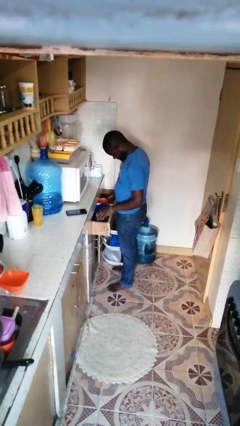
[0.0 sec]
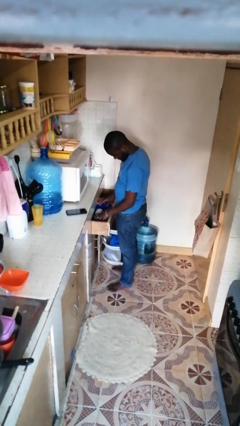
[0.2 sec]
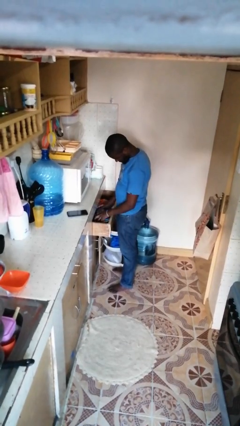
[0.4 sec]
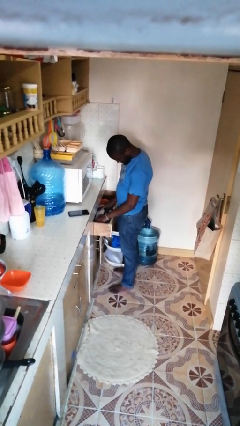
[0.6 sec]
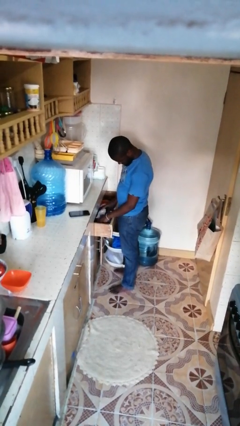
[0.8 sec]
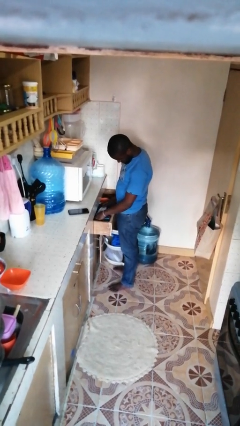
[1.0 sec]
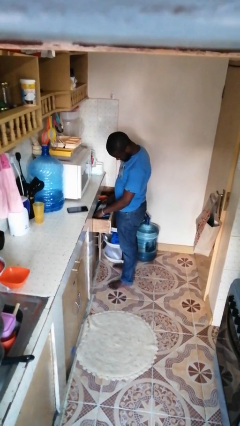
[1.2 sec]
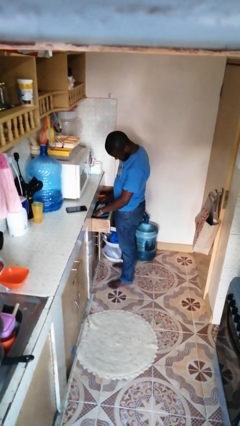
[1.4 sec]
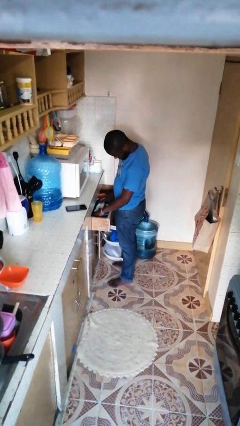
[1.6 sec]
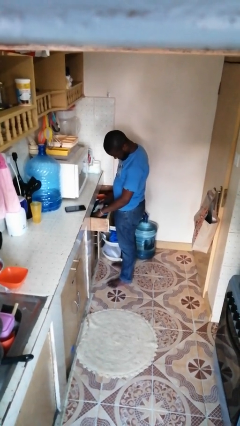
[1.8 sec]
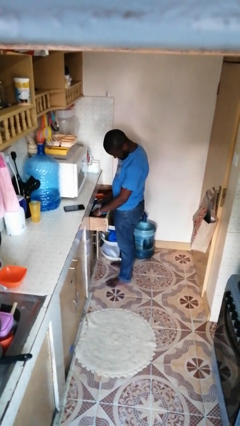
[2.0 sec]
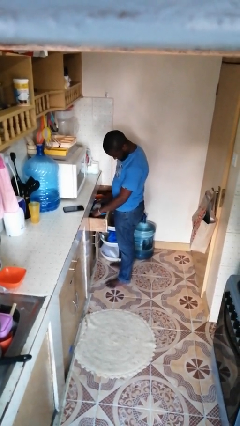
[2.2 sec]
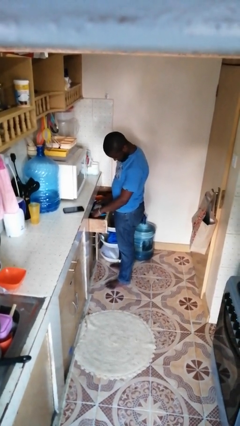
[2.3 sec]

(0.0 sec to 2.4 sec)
person searches in kitchen drawer

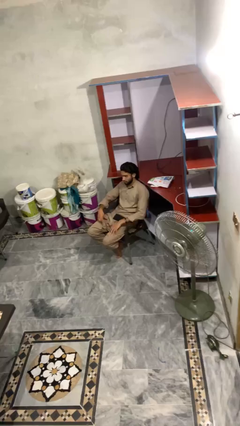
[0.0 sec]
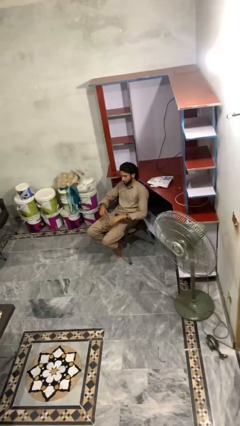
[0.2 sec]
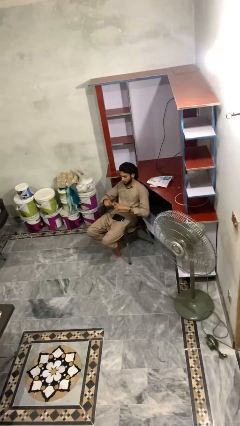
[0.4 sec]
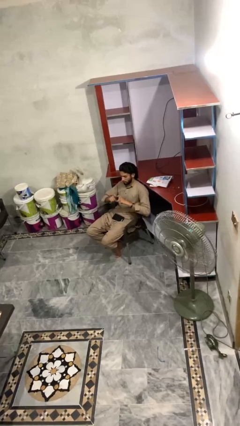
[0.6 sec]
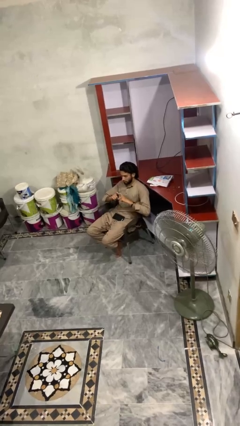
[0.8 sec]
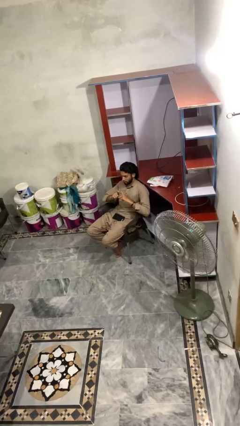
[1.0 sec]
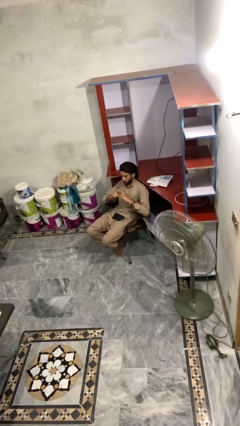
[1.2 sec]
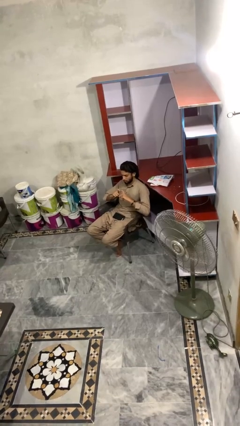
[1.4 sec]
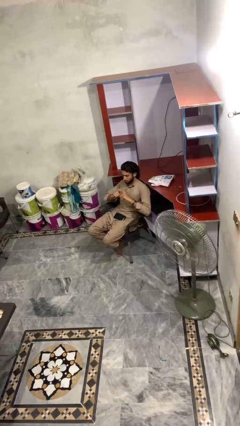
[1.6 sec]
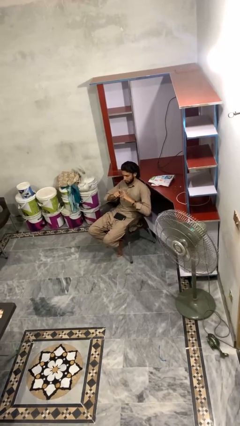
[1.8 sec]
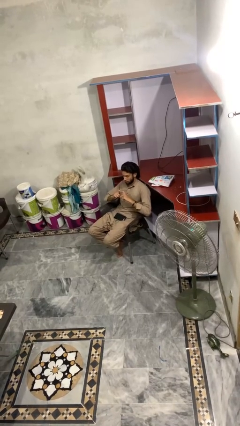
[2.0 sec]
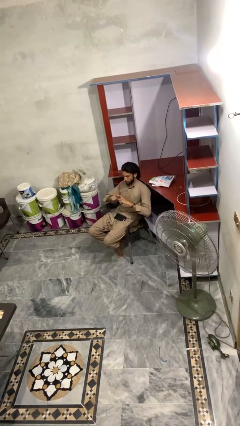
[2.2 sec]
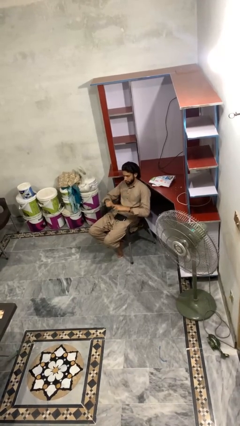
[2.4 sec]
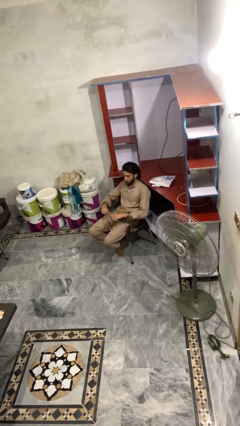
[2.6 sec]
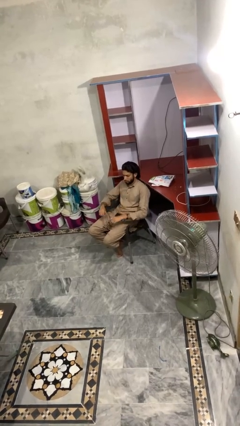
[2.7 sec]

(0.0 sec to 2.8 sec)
person gestures heart

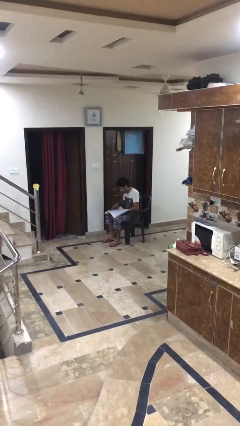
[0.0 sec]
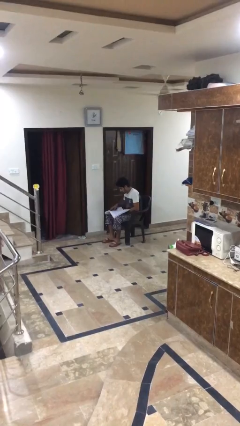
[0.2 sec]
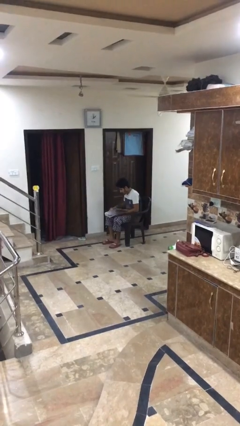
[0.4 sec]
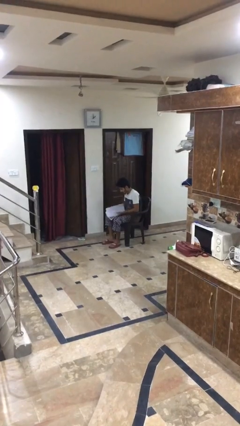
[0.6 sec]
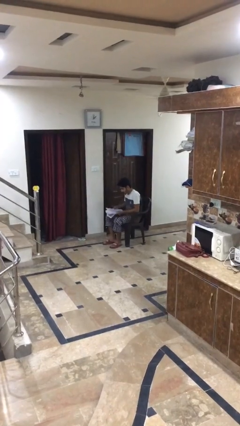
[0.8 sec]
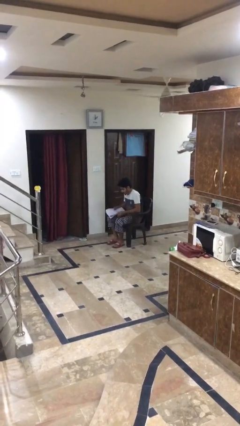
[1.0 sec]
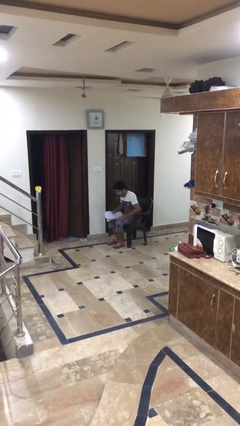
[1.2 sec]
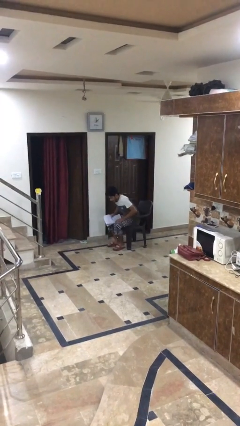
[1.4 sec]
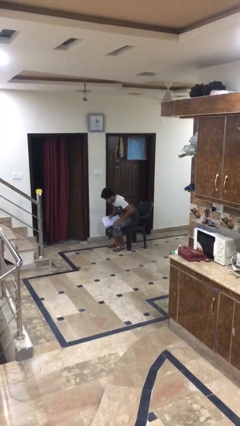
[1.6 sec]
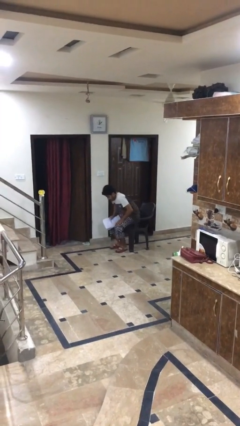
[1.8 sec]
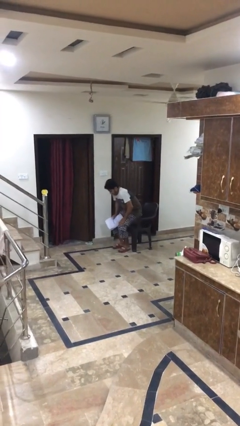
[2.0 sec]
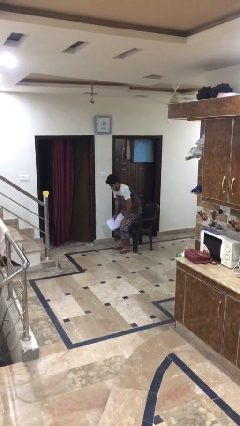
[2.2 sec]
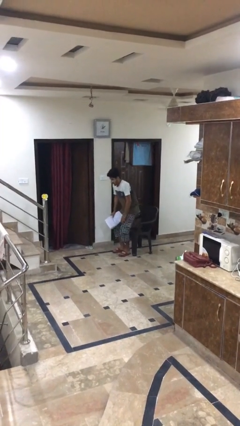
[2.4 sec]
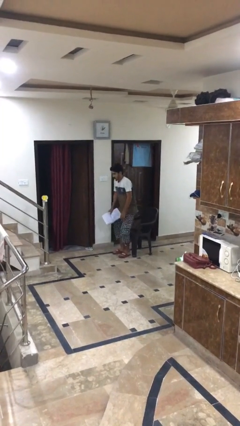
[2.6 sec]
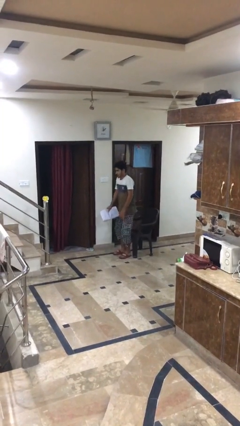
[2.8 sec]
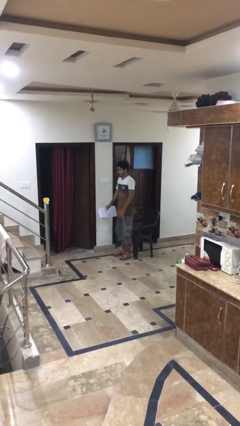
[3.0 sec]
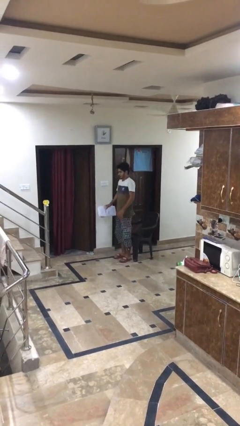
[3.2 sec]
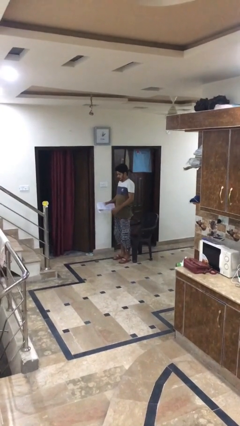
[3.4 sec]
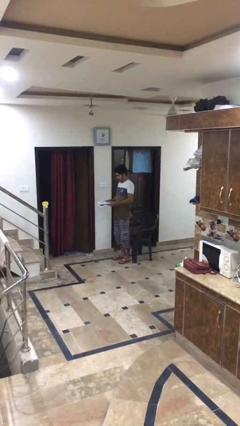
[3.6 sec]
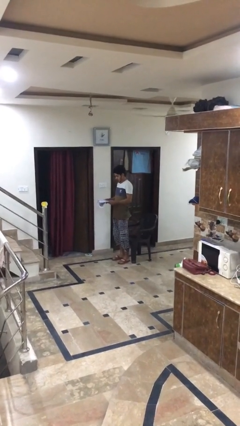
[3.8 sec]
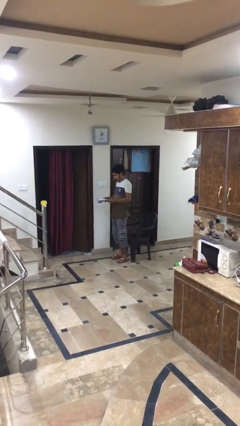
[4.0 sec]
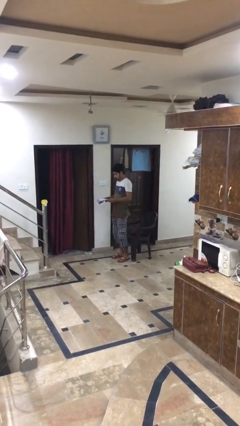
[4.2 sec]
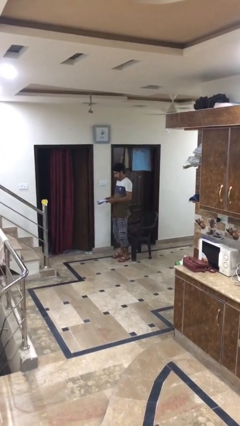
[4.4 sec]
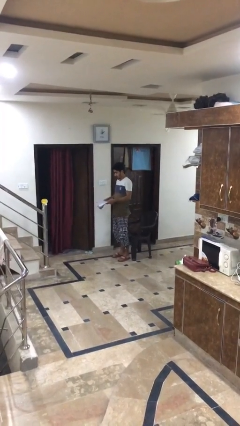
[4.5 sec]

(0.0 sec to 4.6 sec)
person stands up

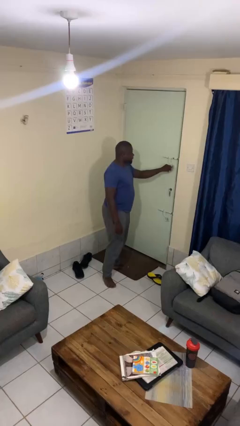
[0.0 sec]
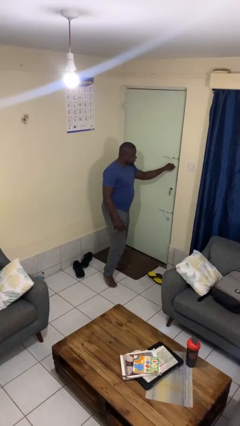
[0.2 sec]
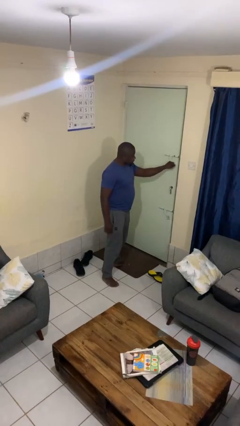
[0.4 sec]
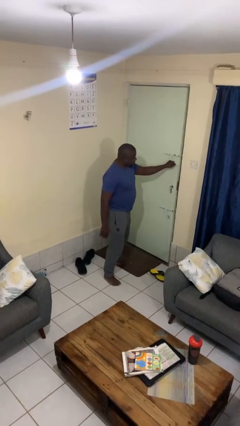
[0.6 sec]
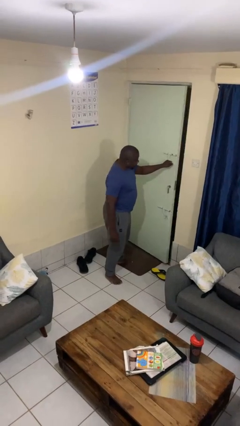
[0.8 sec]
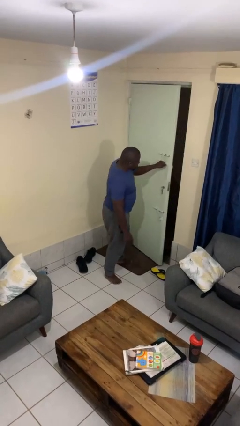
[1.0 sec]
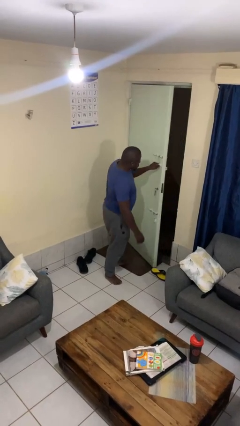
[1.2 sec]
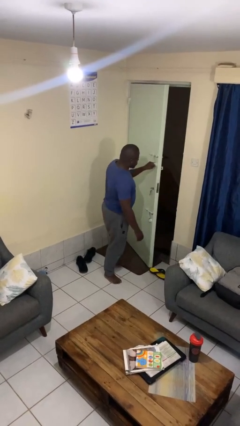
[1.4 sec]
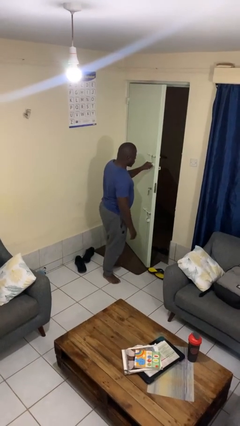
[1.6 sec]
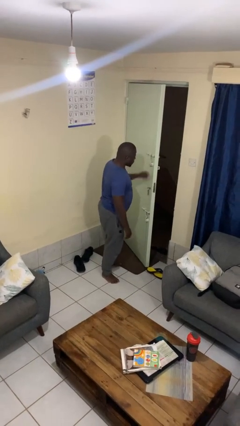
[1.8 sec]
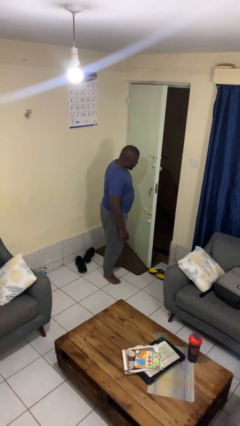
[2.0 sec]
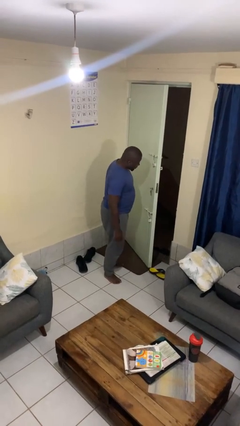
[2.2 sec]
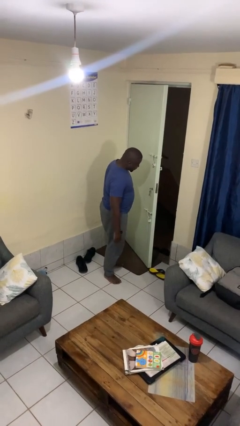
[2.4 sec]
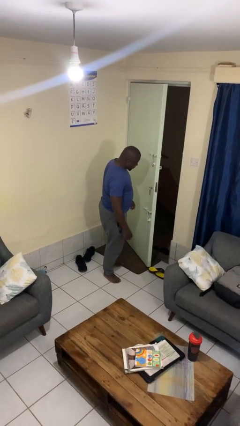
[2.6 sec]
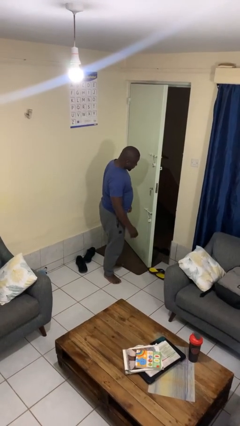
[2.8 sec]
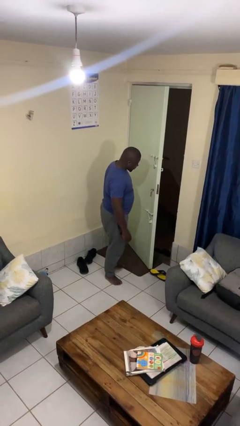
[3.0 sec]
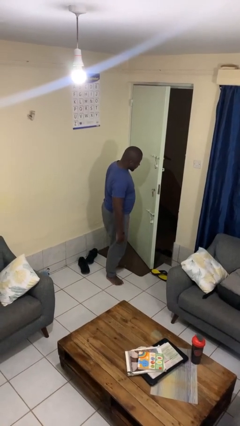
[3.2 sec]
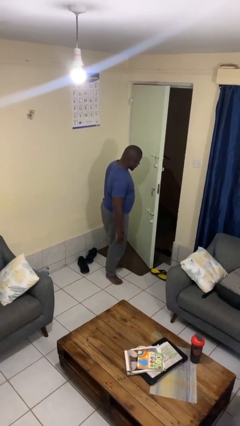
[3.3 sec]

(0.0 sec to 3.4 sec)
person opens facility door

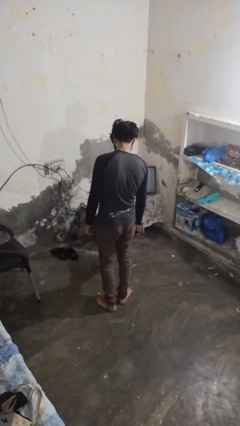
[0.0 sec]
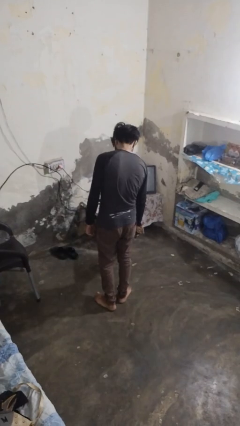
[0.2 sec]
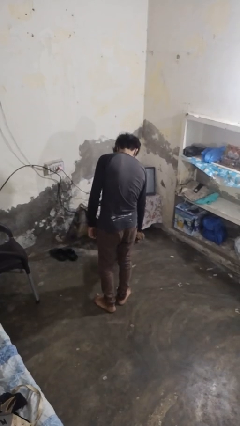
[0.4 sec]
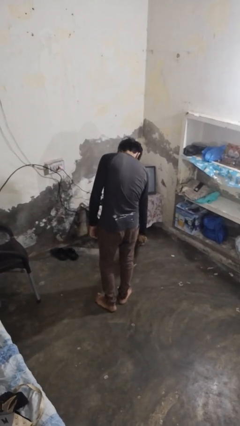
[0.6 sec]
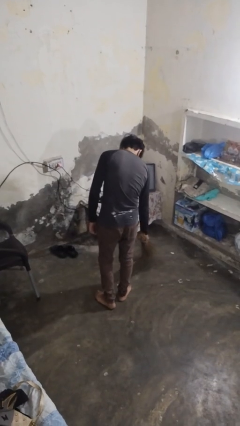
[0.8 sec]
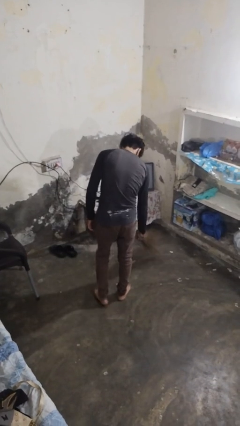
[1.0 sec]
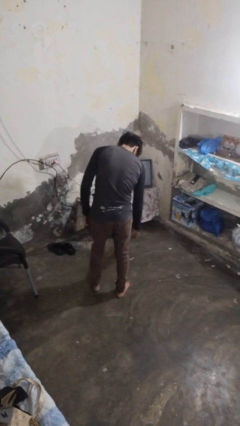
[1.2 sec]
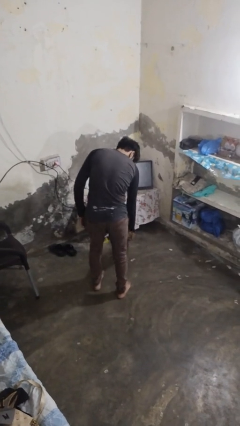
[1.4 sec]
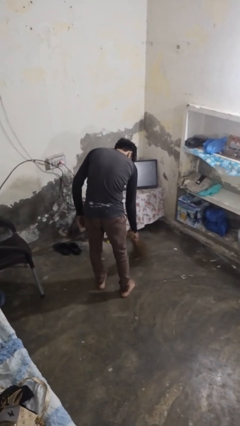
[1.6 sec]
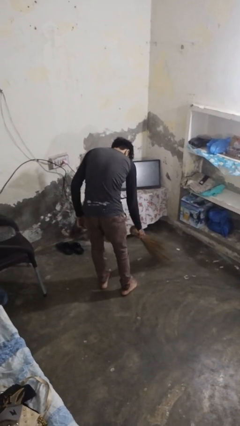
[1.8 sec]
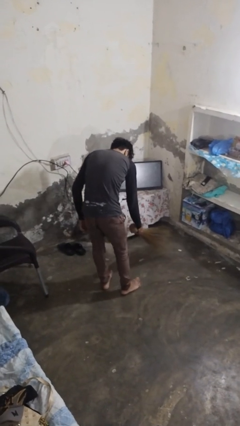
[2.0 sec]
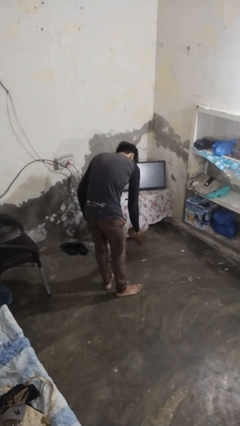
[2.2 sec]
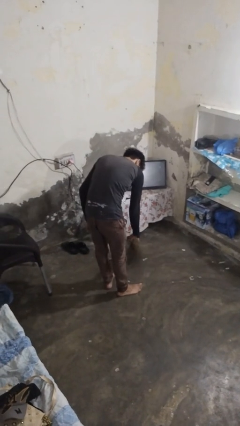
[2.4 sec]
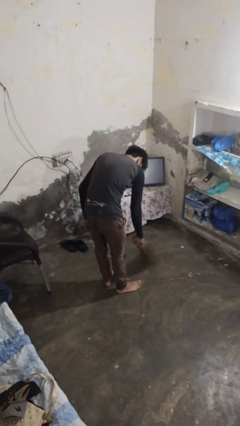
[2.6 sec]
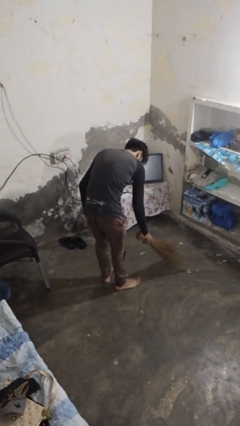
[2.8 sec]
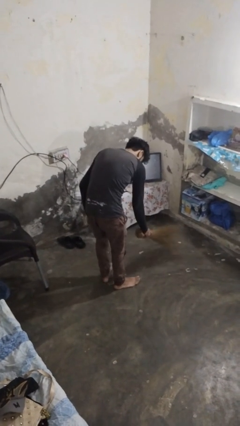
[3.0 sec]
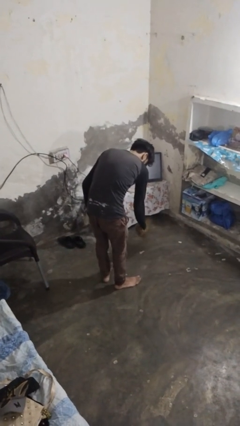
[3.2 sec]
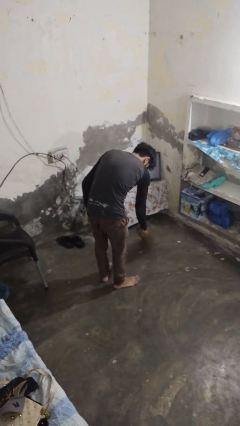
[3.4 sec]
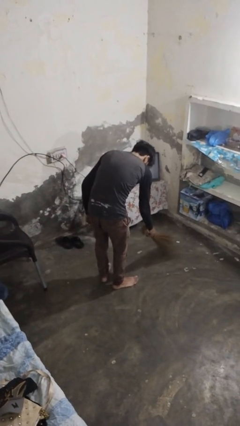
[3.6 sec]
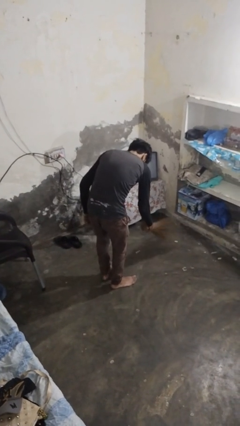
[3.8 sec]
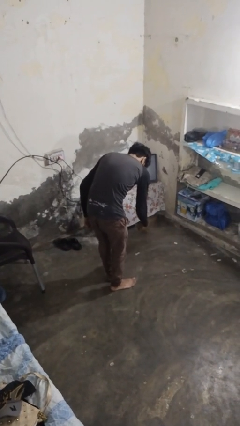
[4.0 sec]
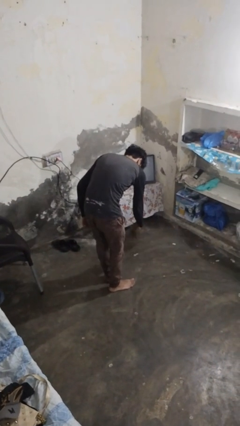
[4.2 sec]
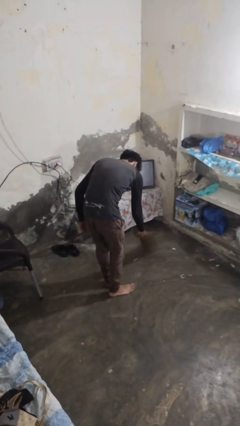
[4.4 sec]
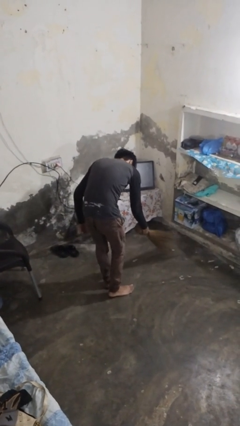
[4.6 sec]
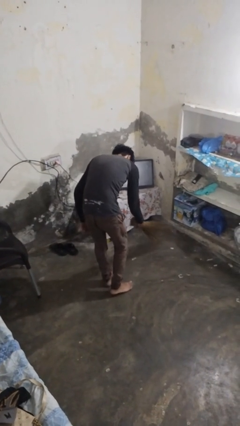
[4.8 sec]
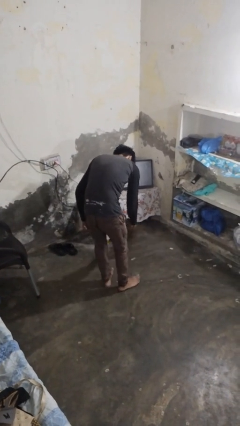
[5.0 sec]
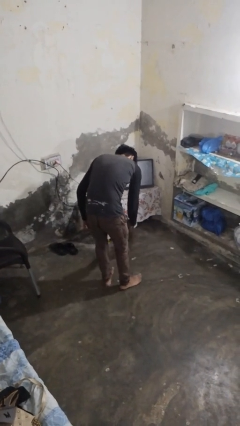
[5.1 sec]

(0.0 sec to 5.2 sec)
person sweeps floor
